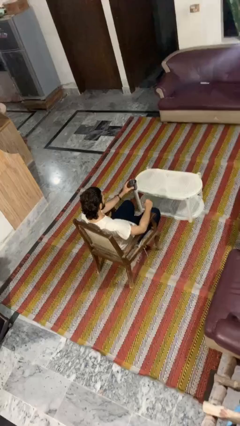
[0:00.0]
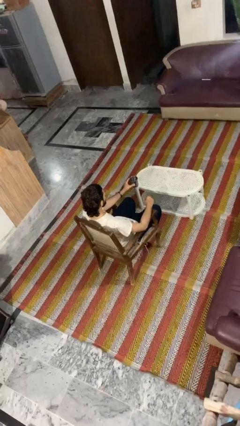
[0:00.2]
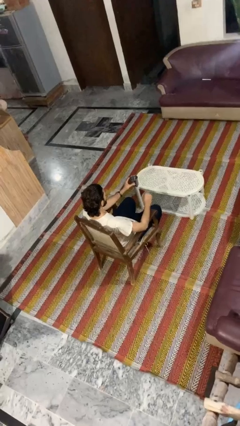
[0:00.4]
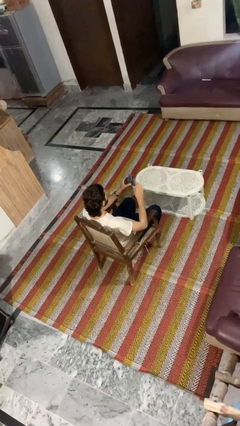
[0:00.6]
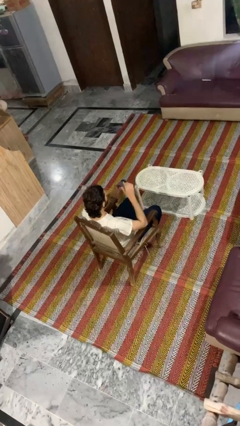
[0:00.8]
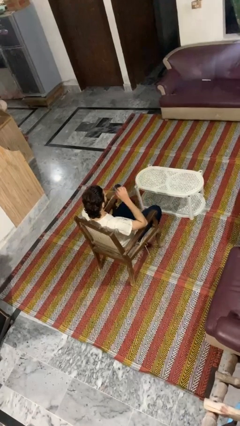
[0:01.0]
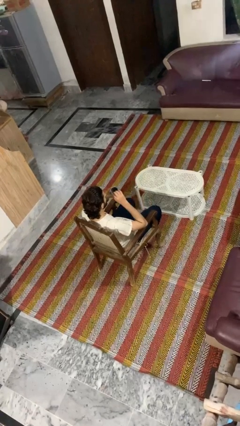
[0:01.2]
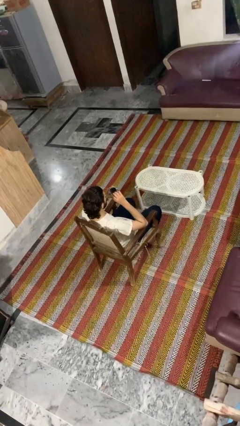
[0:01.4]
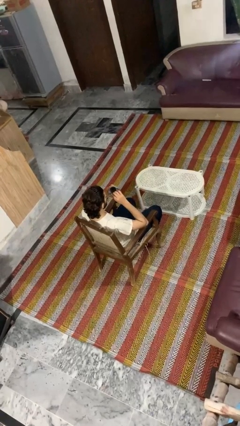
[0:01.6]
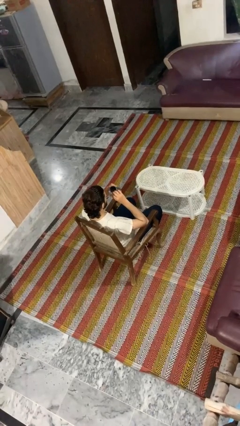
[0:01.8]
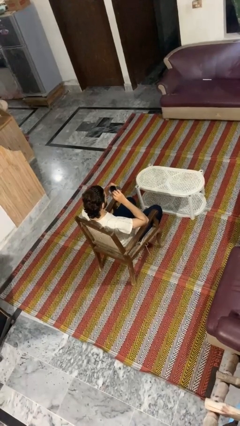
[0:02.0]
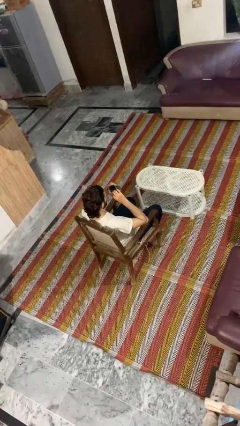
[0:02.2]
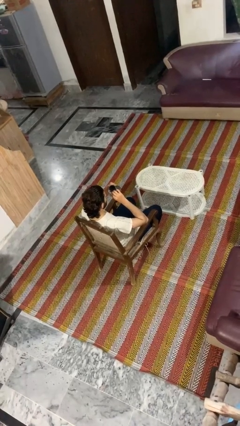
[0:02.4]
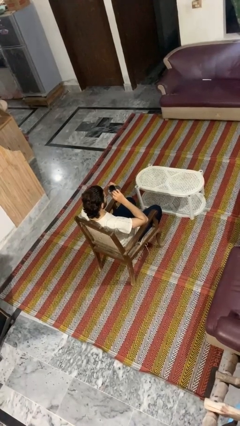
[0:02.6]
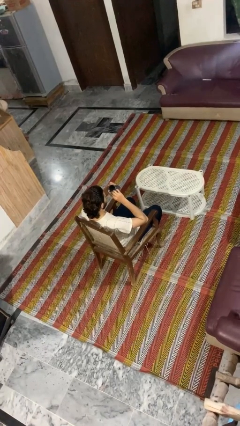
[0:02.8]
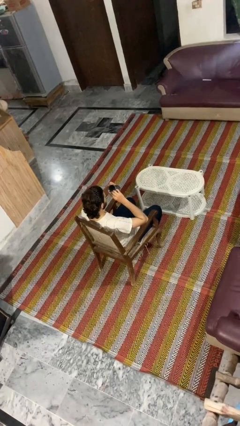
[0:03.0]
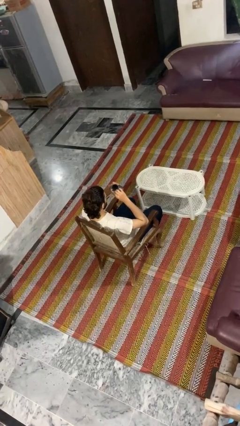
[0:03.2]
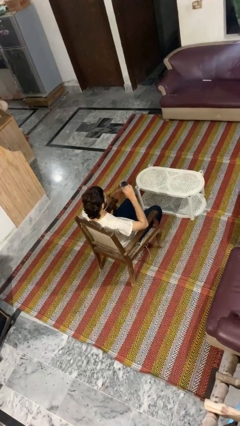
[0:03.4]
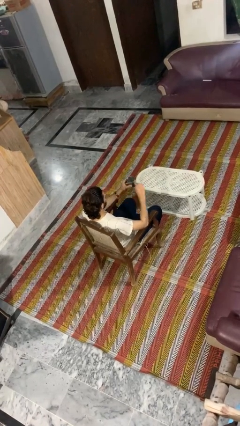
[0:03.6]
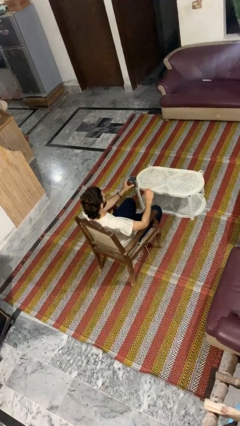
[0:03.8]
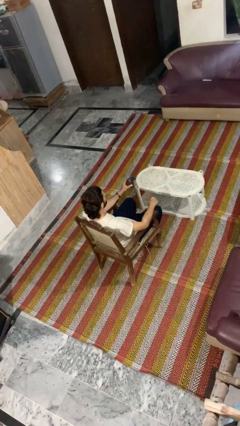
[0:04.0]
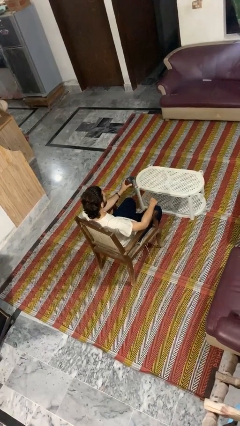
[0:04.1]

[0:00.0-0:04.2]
person drinks from straw

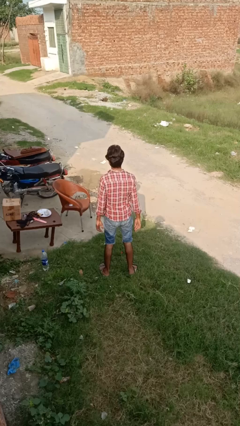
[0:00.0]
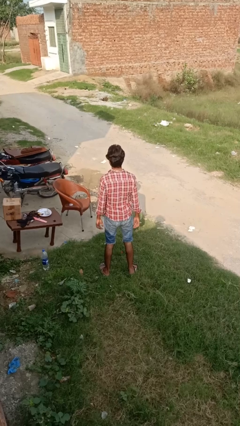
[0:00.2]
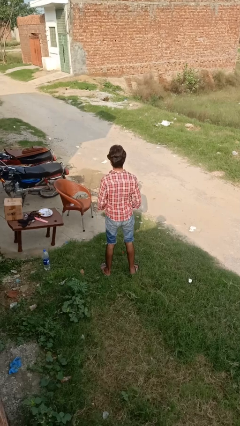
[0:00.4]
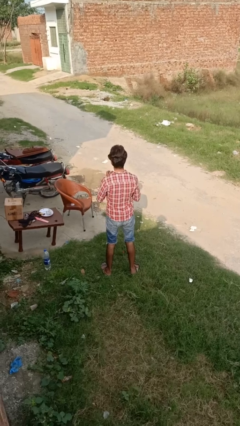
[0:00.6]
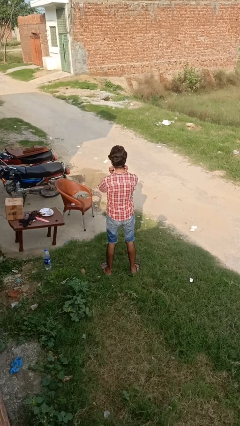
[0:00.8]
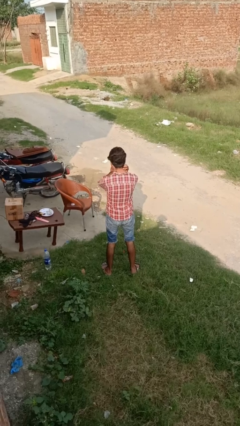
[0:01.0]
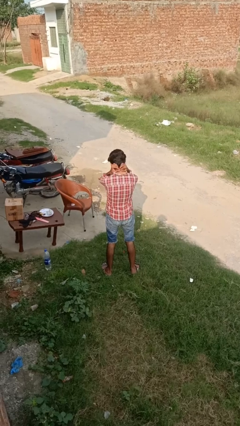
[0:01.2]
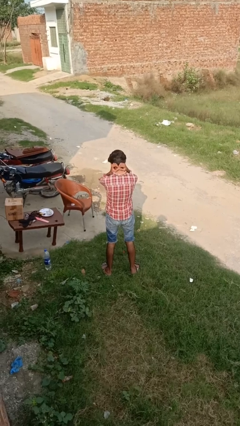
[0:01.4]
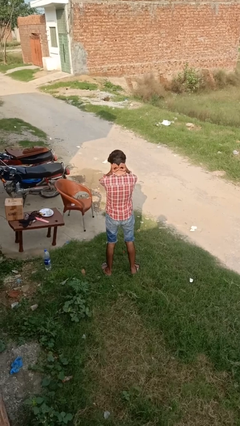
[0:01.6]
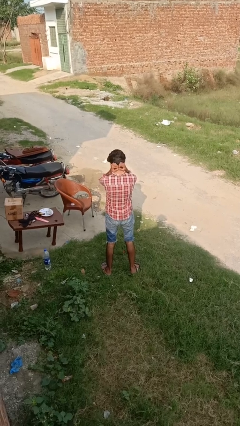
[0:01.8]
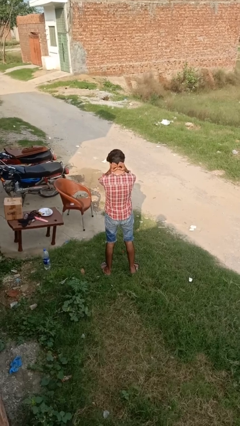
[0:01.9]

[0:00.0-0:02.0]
person puts on necklace

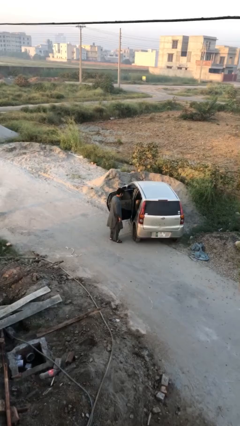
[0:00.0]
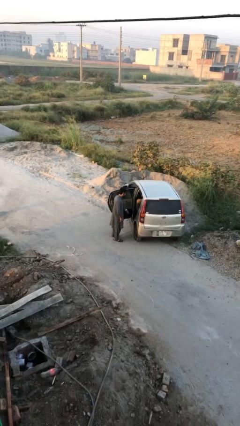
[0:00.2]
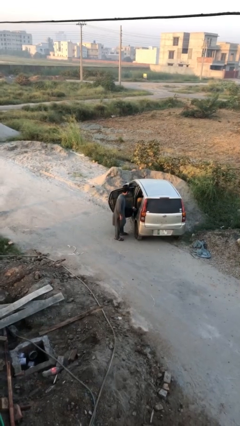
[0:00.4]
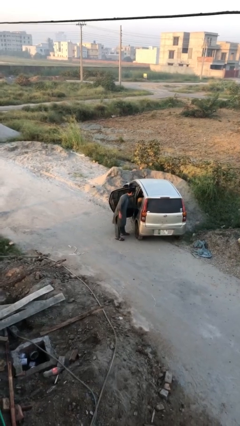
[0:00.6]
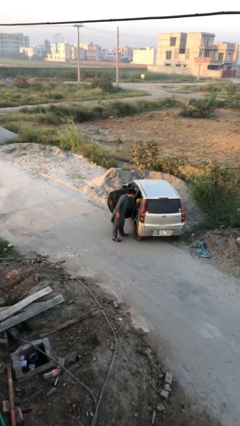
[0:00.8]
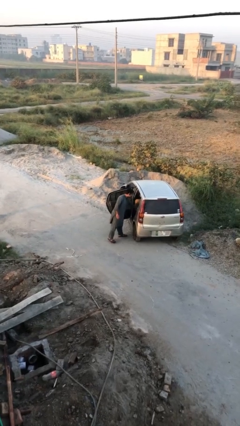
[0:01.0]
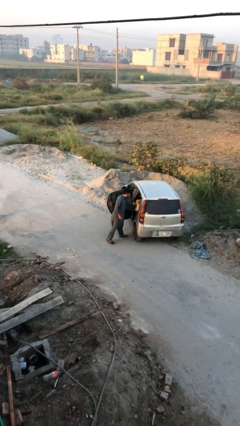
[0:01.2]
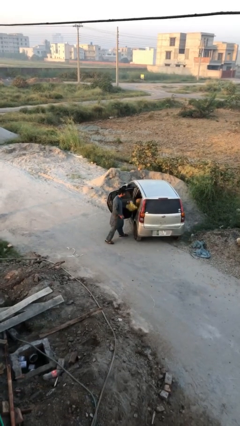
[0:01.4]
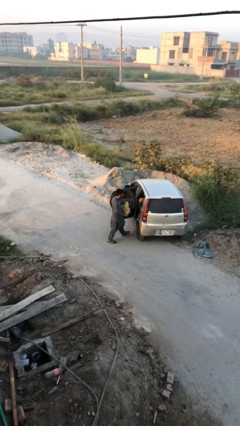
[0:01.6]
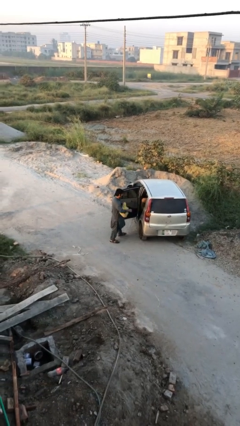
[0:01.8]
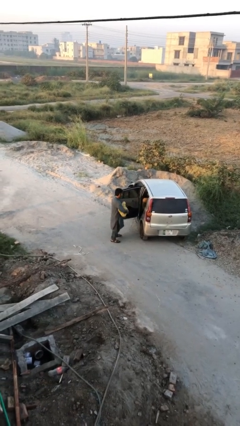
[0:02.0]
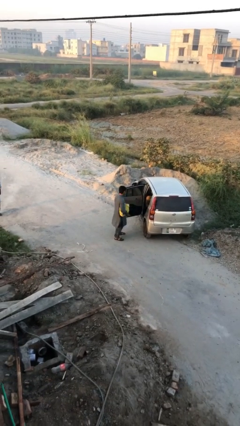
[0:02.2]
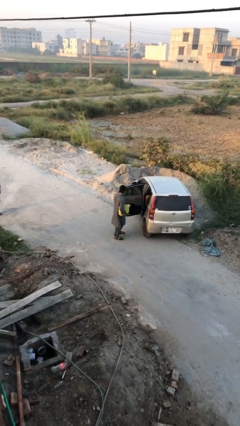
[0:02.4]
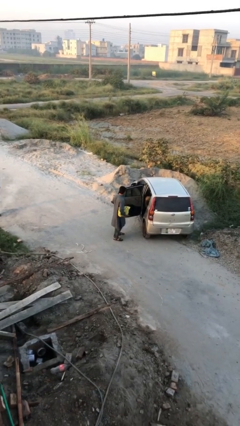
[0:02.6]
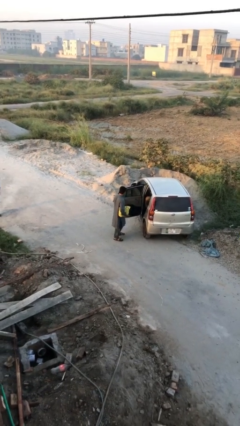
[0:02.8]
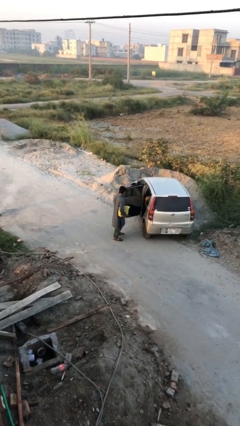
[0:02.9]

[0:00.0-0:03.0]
person unloads car

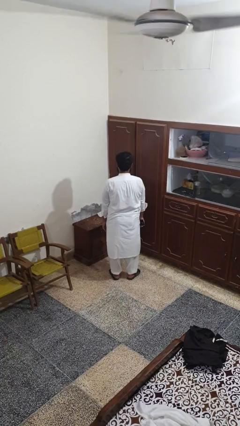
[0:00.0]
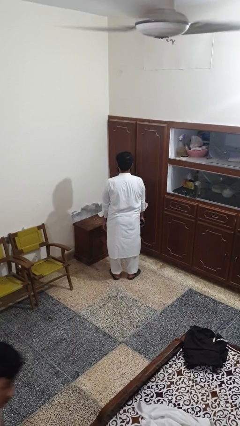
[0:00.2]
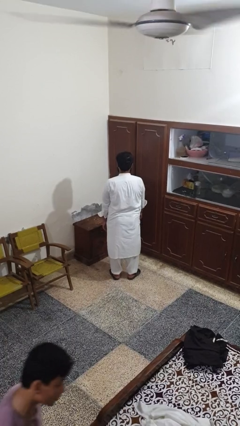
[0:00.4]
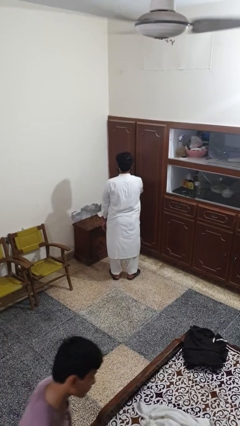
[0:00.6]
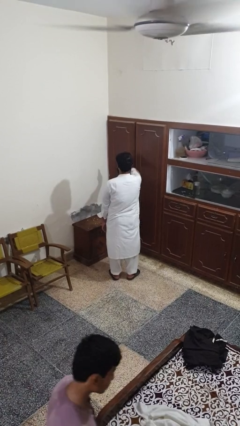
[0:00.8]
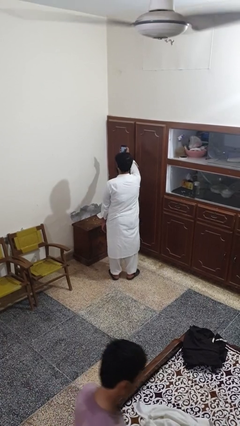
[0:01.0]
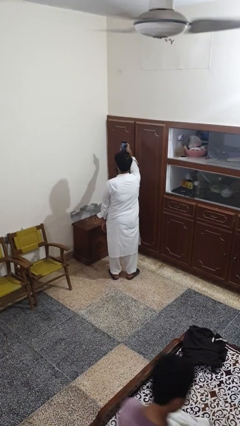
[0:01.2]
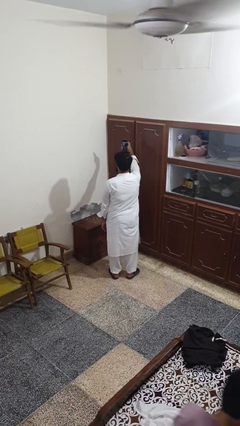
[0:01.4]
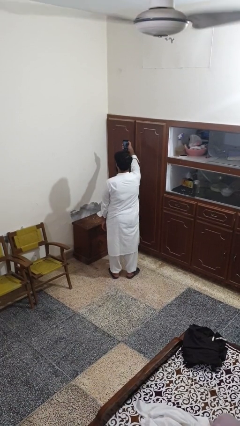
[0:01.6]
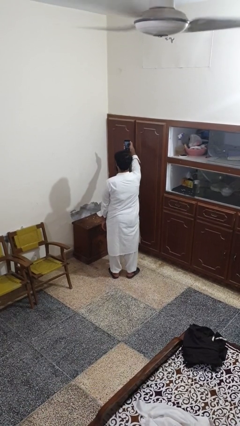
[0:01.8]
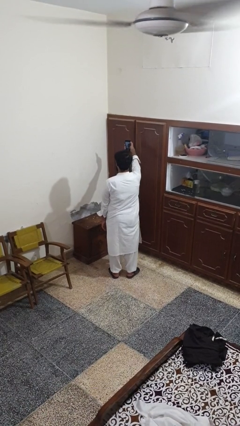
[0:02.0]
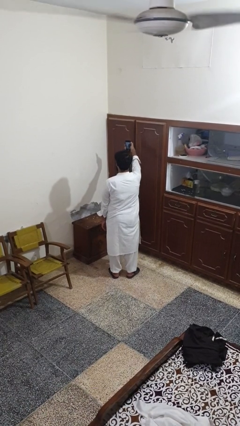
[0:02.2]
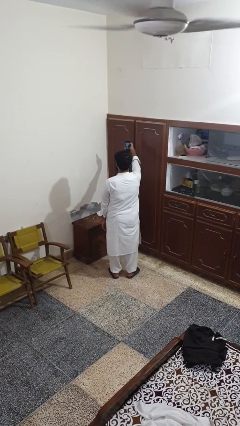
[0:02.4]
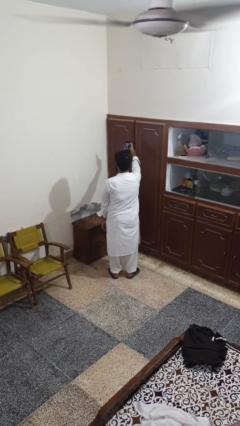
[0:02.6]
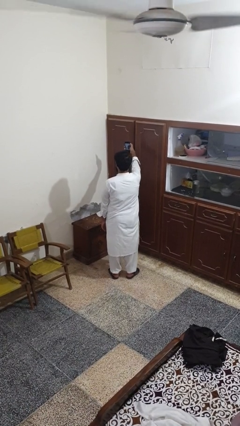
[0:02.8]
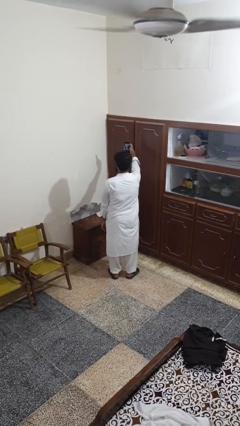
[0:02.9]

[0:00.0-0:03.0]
person takes selfie

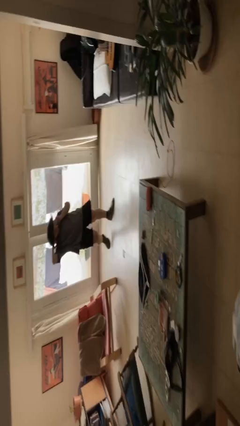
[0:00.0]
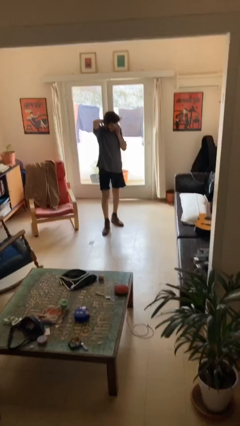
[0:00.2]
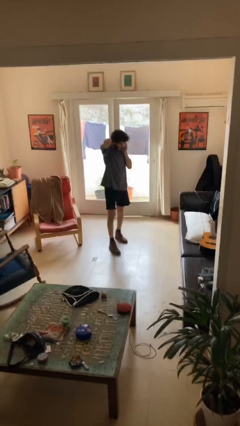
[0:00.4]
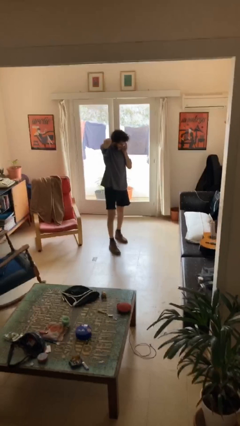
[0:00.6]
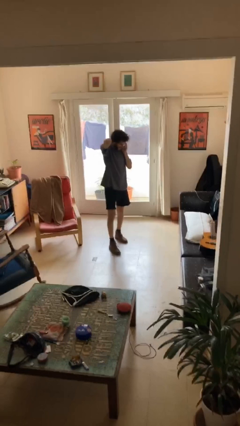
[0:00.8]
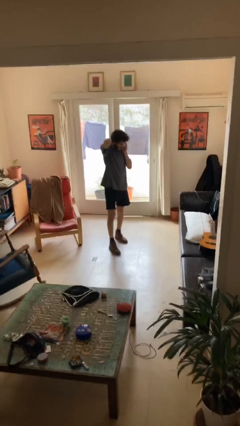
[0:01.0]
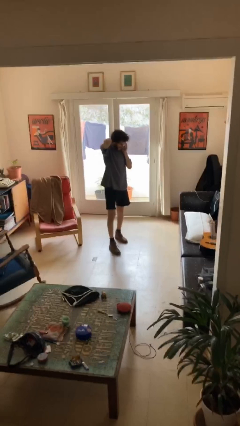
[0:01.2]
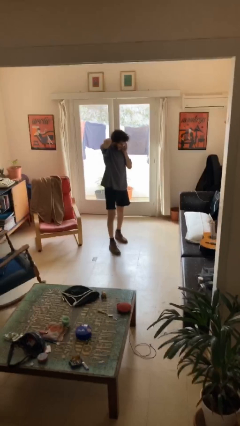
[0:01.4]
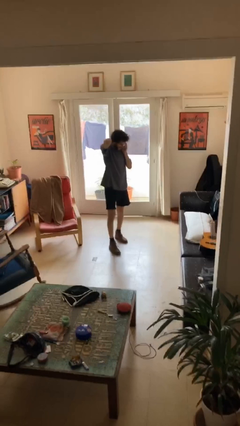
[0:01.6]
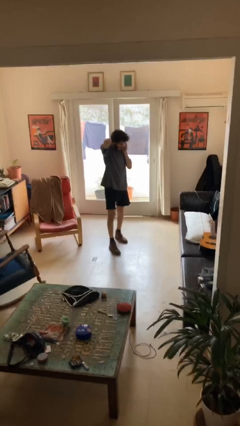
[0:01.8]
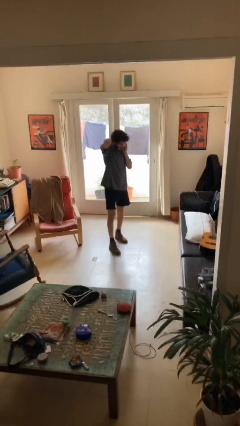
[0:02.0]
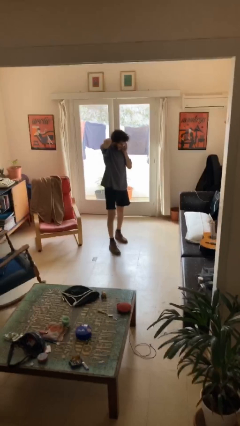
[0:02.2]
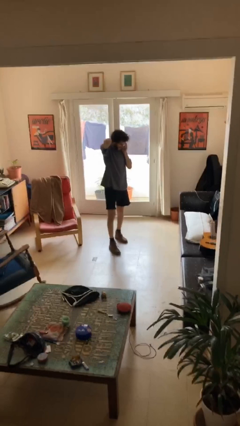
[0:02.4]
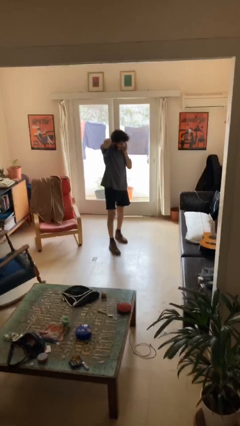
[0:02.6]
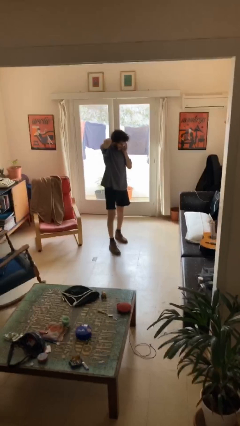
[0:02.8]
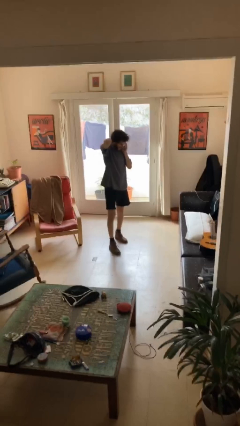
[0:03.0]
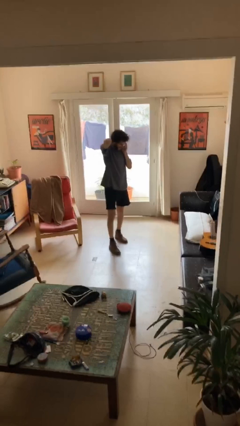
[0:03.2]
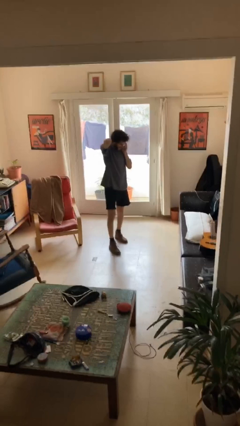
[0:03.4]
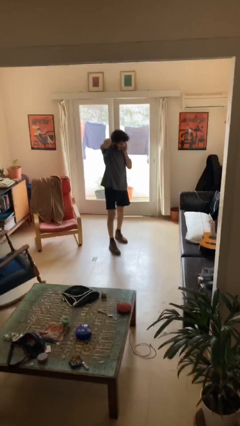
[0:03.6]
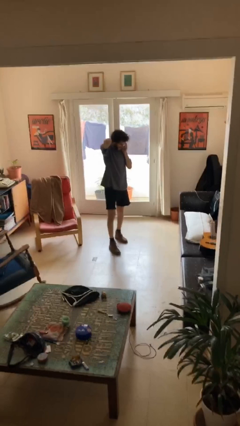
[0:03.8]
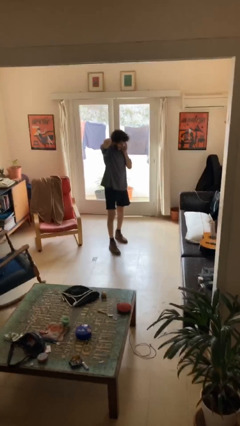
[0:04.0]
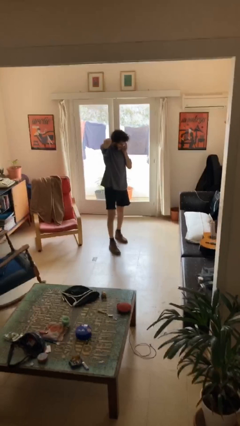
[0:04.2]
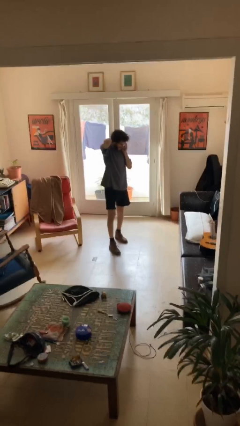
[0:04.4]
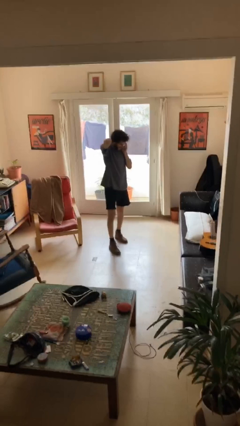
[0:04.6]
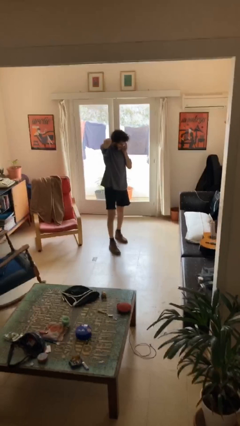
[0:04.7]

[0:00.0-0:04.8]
person opens facility door
